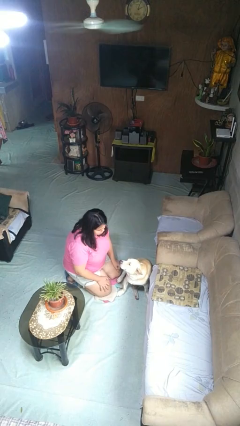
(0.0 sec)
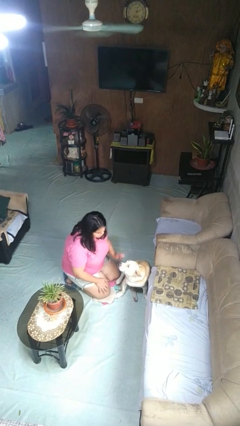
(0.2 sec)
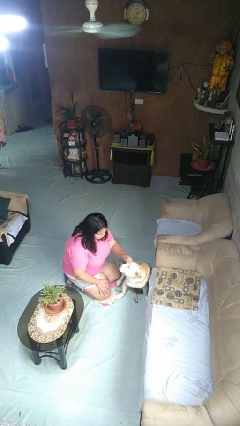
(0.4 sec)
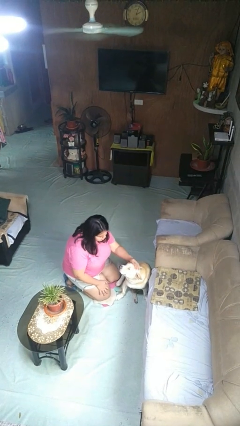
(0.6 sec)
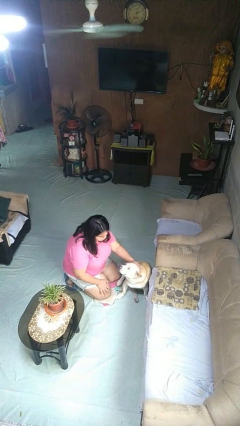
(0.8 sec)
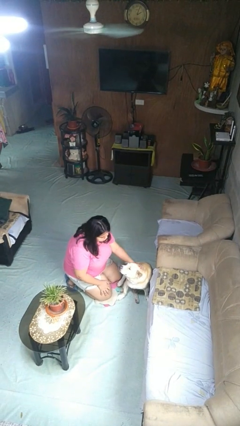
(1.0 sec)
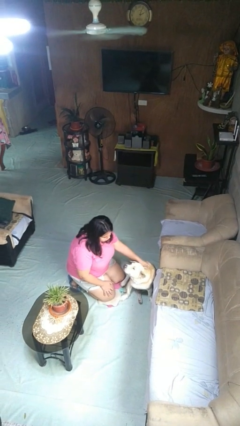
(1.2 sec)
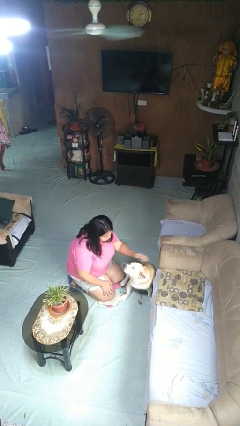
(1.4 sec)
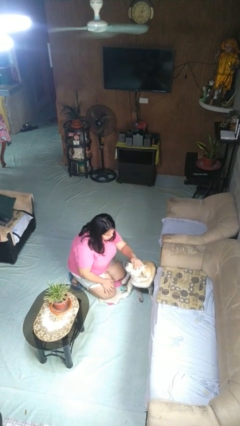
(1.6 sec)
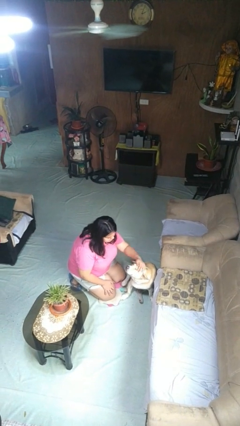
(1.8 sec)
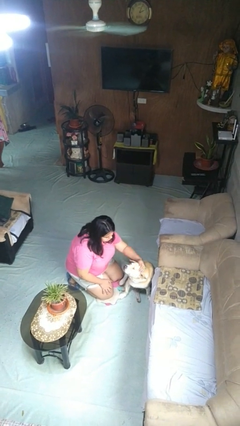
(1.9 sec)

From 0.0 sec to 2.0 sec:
person pets dog

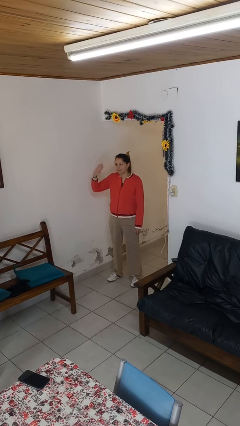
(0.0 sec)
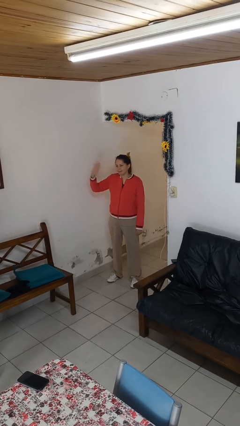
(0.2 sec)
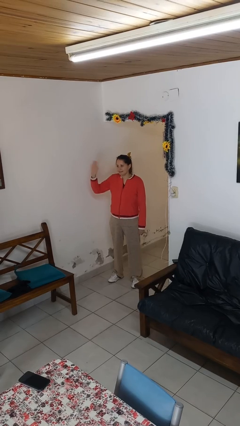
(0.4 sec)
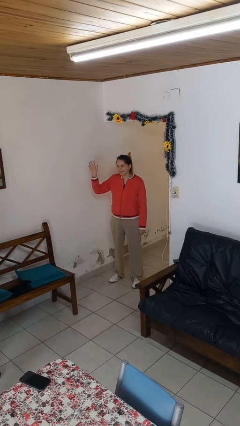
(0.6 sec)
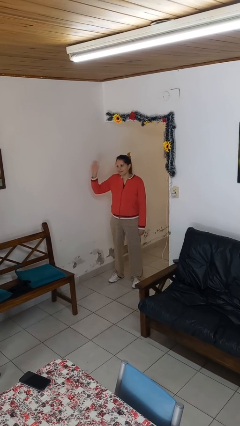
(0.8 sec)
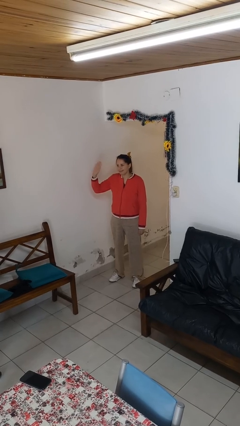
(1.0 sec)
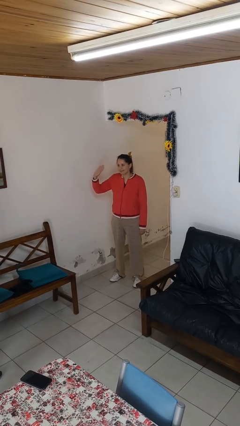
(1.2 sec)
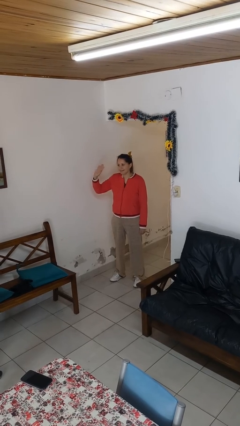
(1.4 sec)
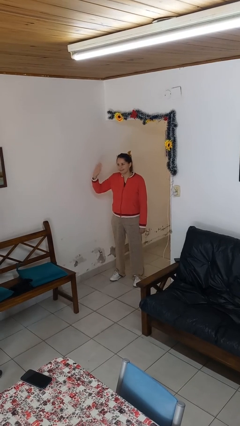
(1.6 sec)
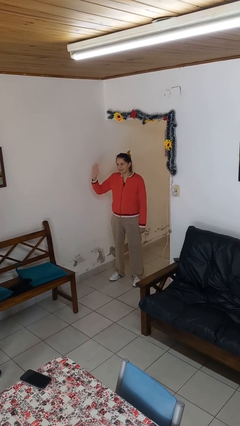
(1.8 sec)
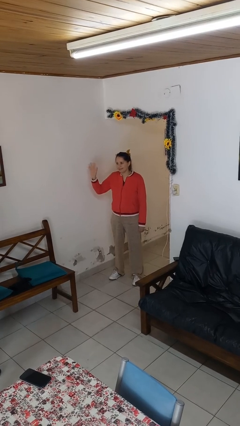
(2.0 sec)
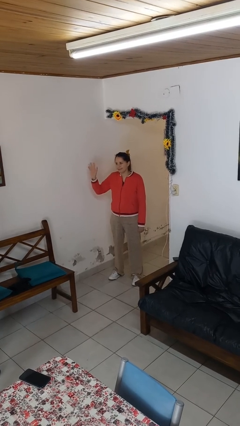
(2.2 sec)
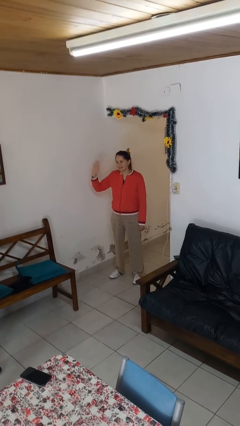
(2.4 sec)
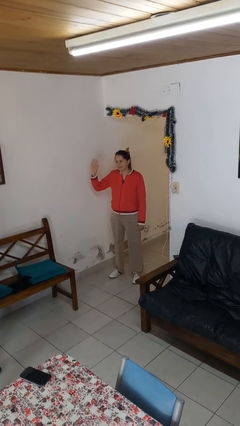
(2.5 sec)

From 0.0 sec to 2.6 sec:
person waves at person

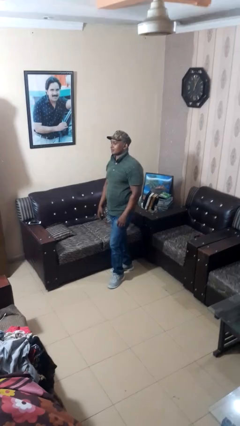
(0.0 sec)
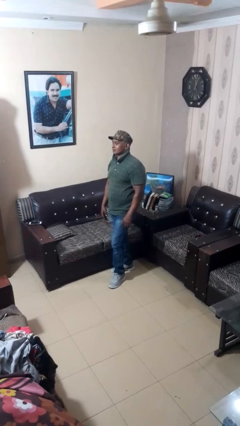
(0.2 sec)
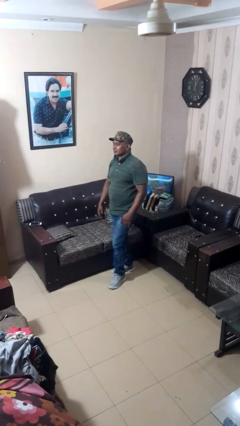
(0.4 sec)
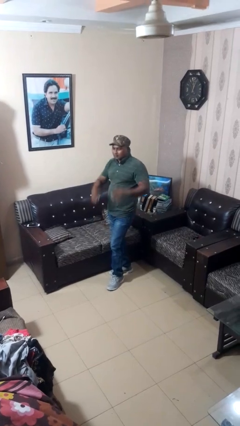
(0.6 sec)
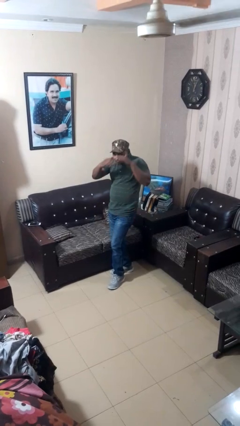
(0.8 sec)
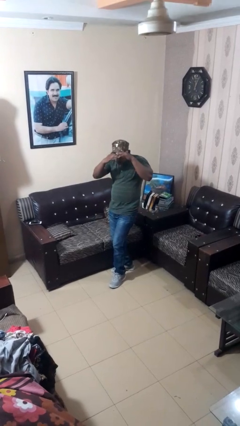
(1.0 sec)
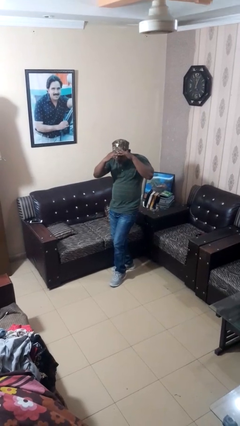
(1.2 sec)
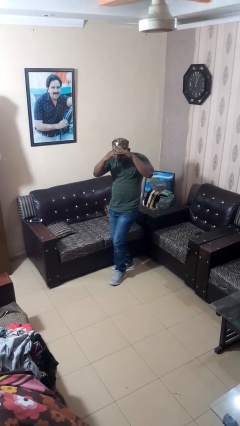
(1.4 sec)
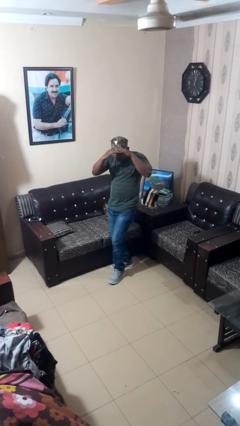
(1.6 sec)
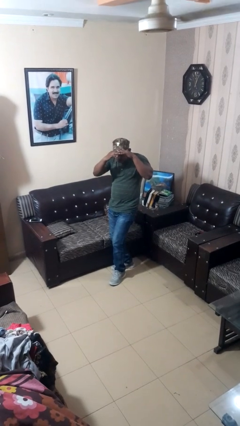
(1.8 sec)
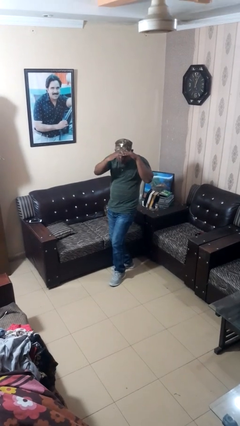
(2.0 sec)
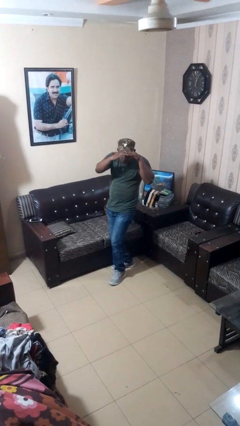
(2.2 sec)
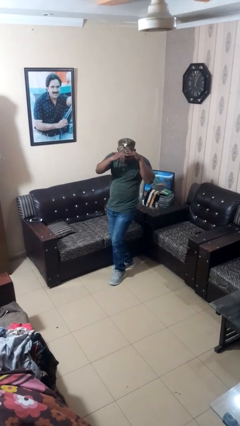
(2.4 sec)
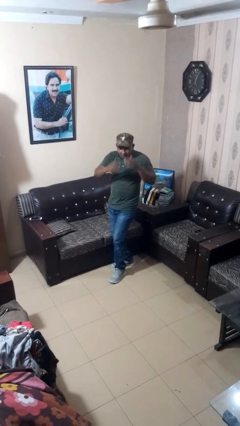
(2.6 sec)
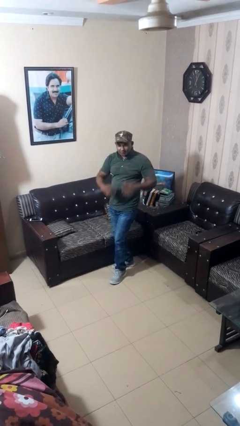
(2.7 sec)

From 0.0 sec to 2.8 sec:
person shades eyes

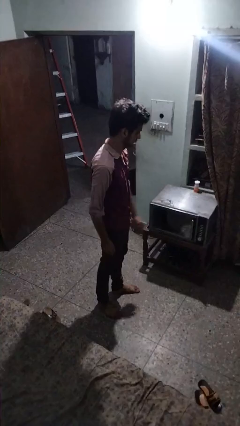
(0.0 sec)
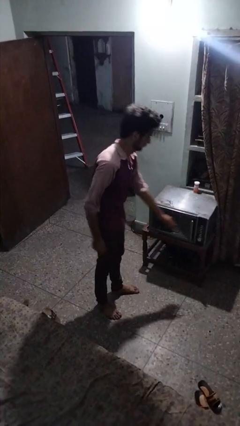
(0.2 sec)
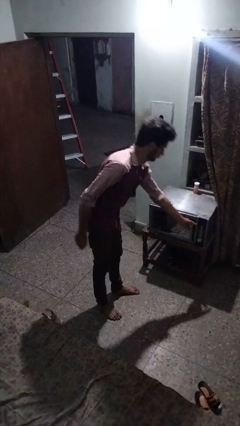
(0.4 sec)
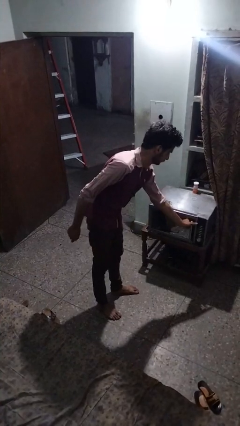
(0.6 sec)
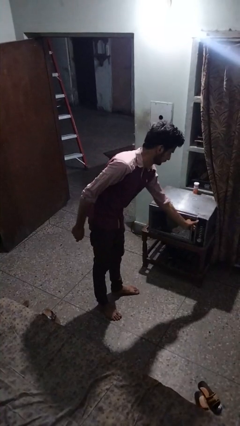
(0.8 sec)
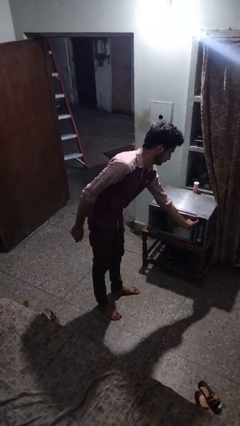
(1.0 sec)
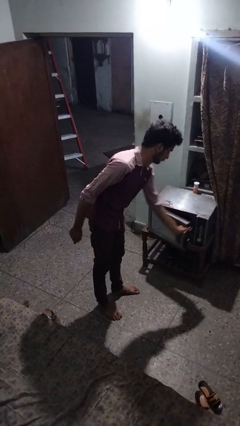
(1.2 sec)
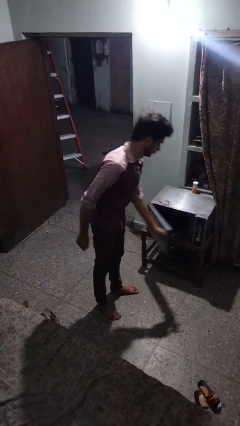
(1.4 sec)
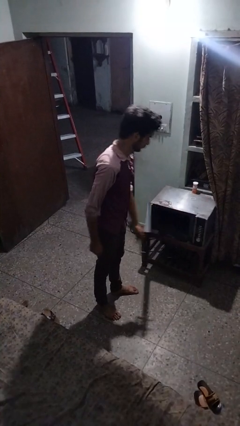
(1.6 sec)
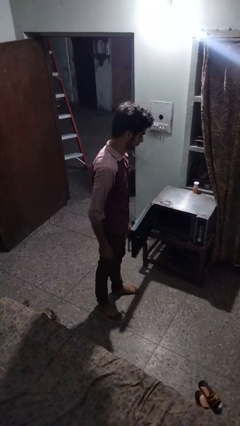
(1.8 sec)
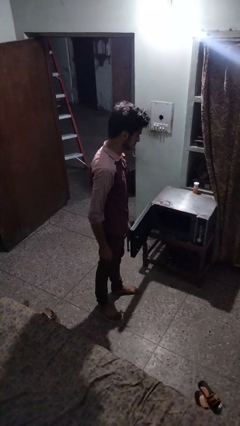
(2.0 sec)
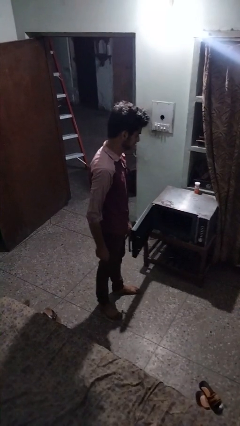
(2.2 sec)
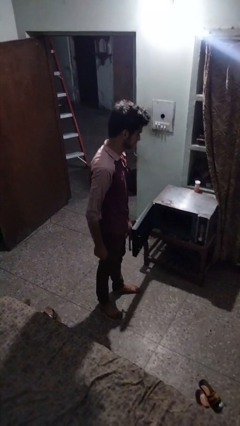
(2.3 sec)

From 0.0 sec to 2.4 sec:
person opens microwave

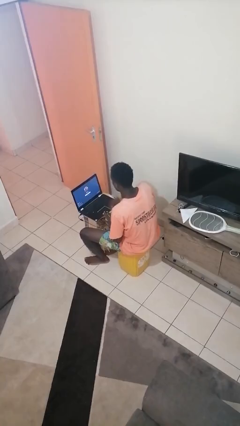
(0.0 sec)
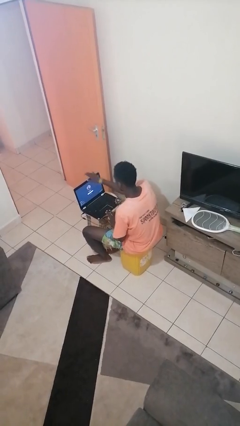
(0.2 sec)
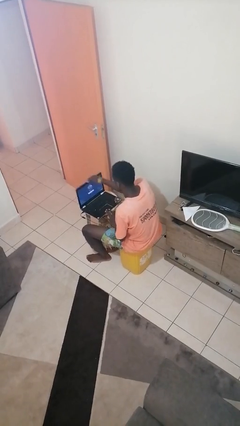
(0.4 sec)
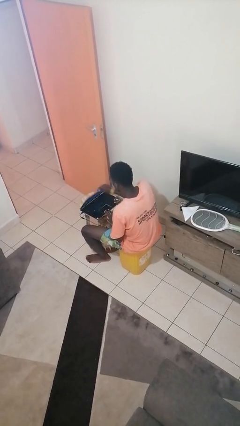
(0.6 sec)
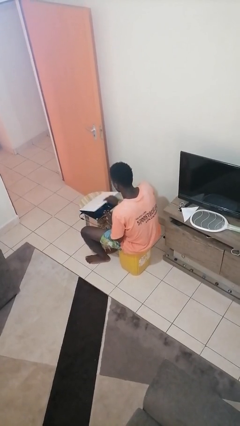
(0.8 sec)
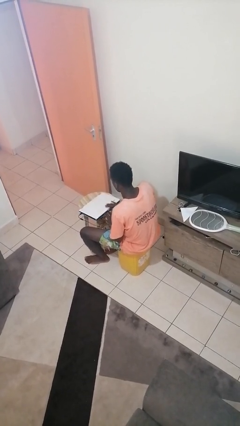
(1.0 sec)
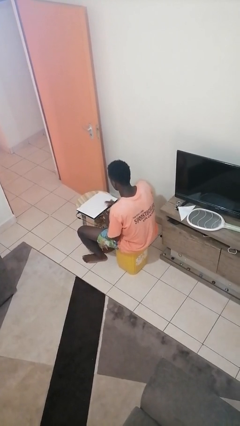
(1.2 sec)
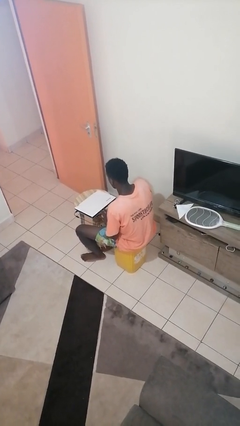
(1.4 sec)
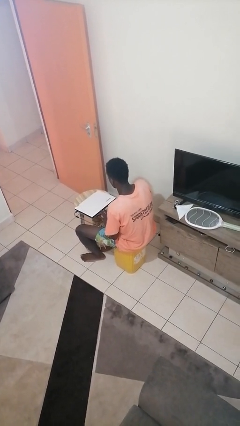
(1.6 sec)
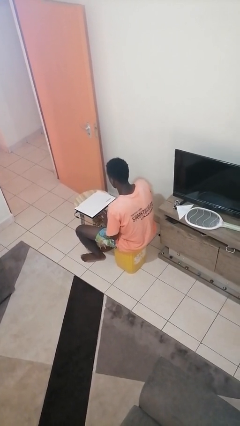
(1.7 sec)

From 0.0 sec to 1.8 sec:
person closes laptop

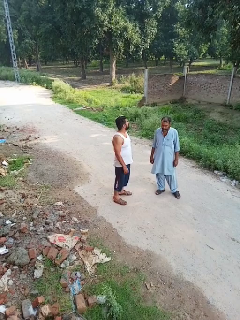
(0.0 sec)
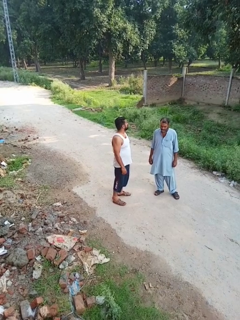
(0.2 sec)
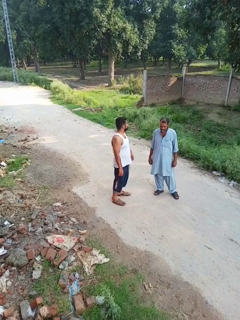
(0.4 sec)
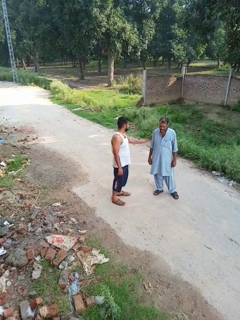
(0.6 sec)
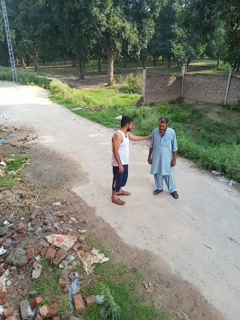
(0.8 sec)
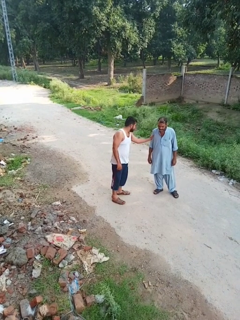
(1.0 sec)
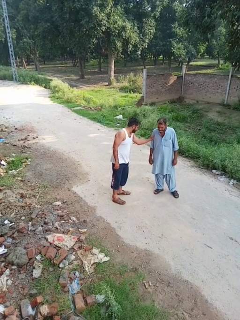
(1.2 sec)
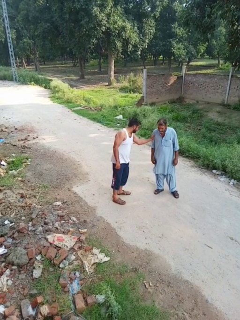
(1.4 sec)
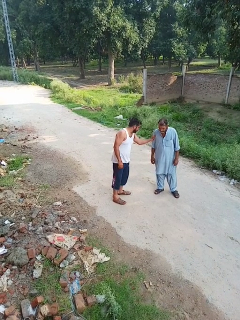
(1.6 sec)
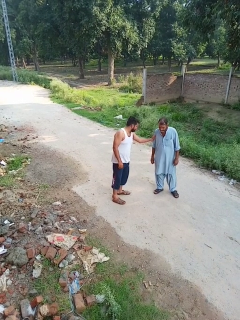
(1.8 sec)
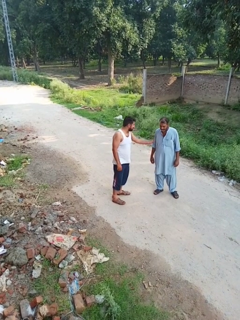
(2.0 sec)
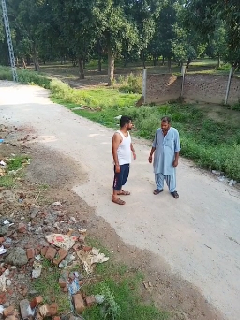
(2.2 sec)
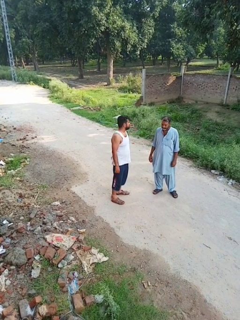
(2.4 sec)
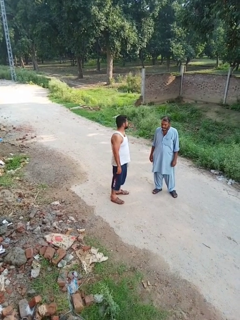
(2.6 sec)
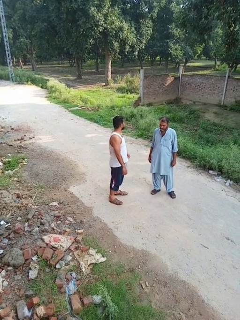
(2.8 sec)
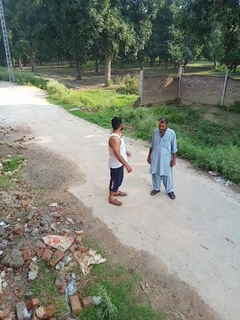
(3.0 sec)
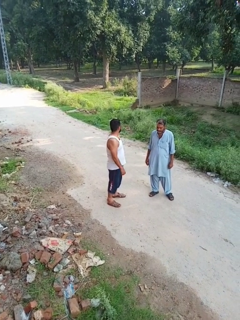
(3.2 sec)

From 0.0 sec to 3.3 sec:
person grabs person by forearm

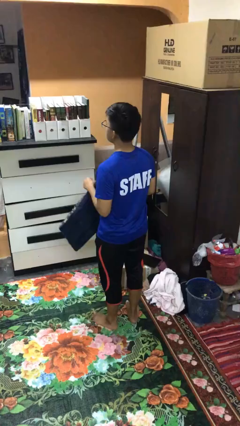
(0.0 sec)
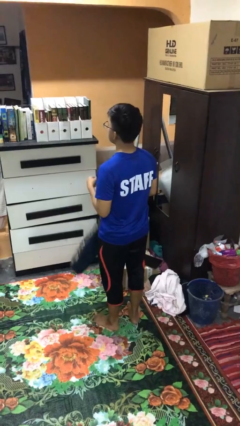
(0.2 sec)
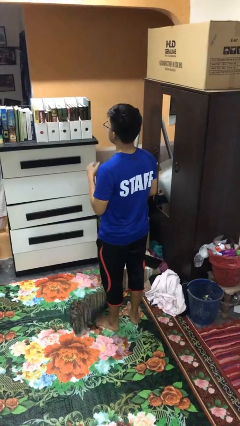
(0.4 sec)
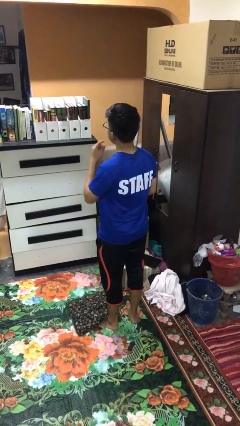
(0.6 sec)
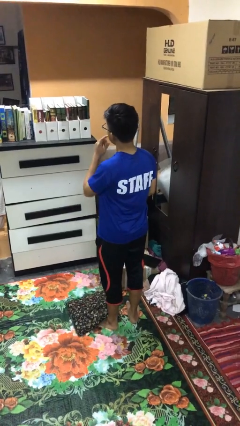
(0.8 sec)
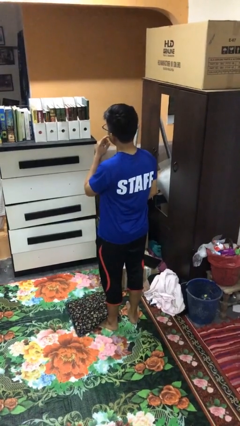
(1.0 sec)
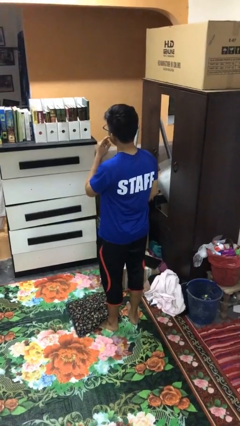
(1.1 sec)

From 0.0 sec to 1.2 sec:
person drops object

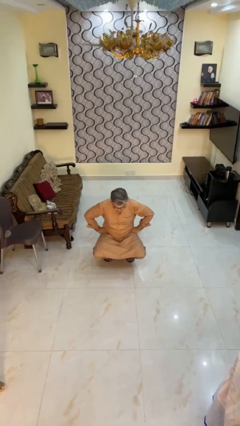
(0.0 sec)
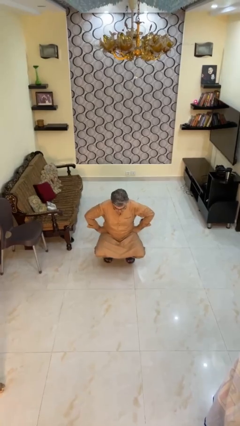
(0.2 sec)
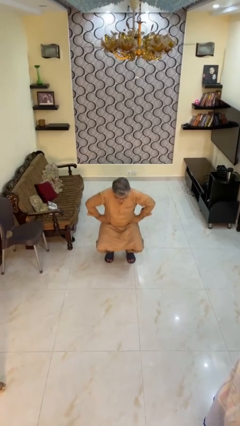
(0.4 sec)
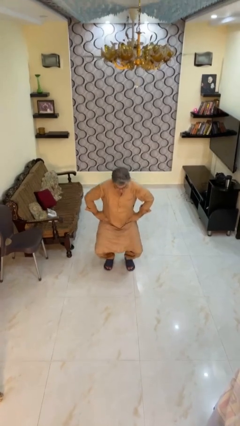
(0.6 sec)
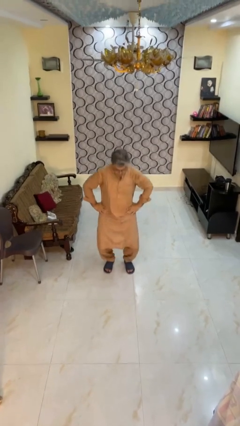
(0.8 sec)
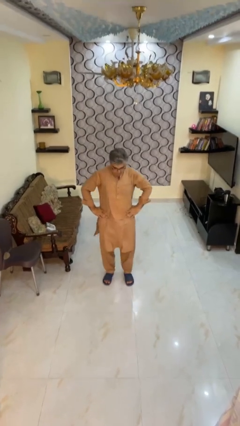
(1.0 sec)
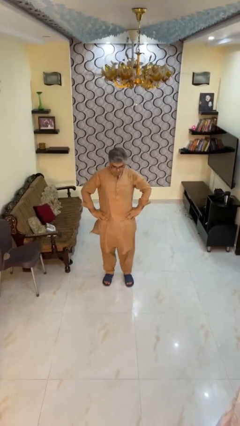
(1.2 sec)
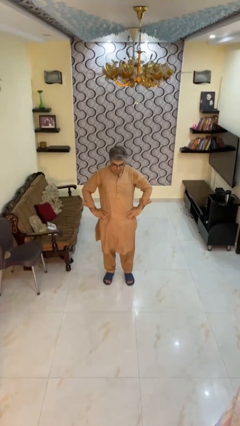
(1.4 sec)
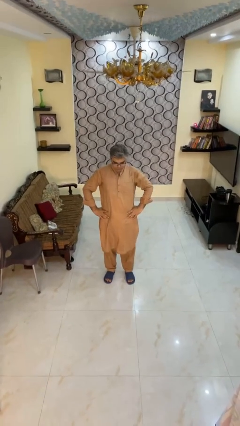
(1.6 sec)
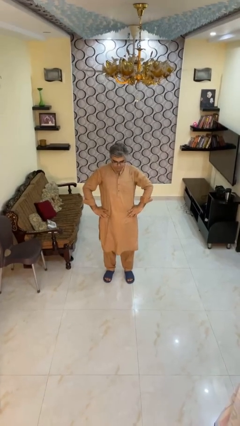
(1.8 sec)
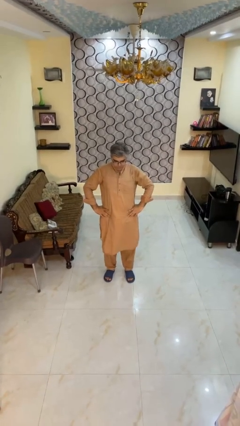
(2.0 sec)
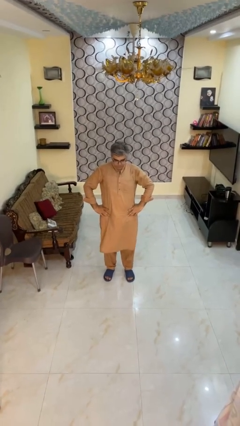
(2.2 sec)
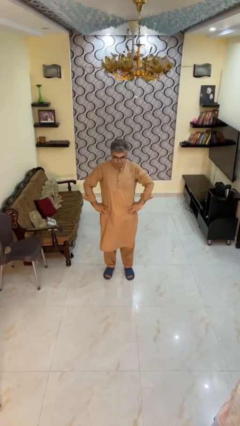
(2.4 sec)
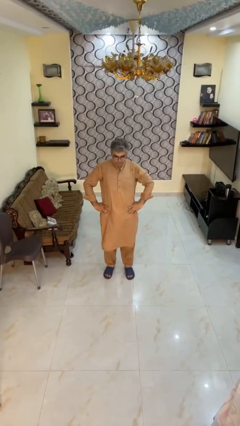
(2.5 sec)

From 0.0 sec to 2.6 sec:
person stands up
